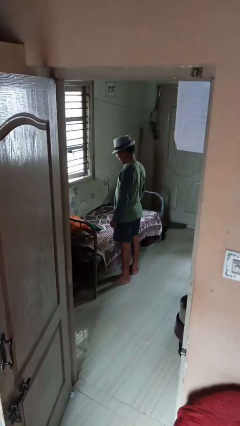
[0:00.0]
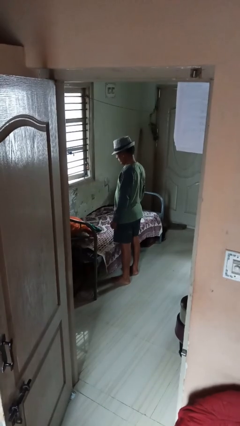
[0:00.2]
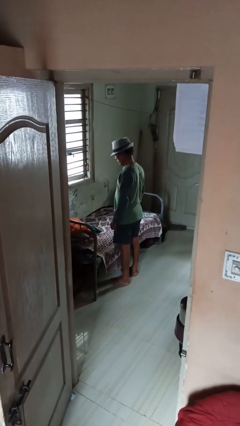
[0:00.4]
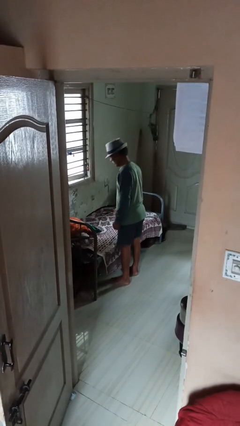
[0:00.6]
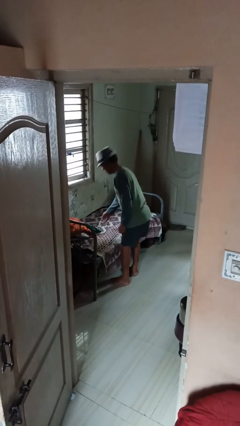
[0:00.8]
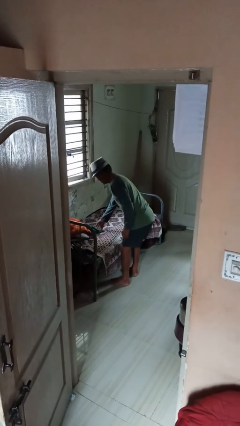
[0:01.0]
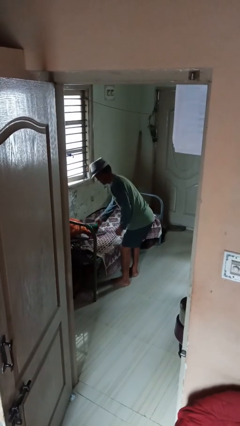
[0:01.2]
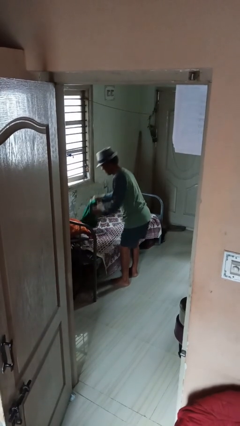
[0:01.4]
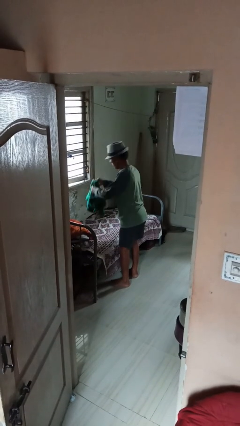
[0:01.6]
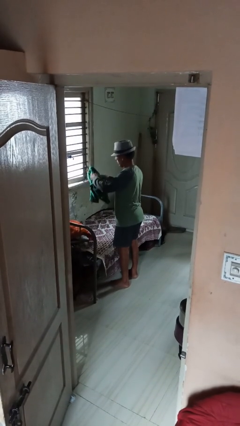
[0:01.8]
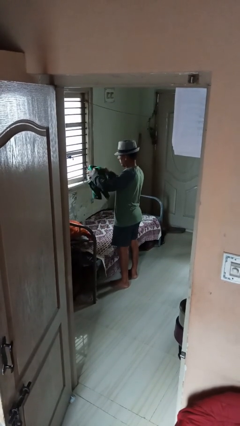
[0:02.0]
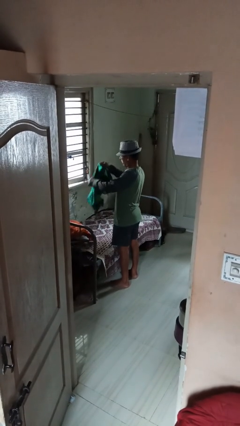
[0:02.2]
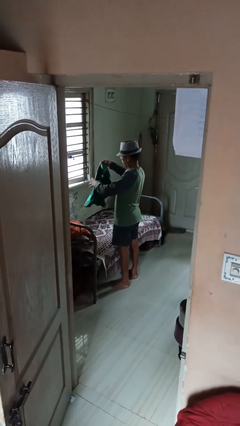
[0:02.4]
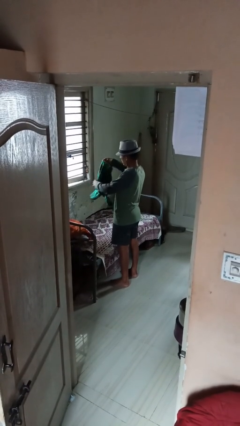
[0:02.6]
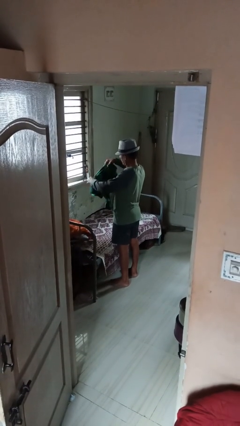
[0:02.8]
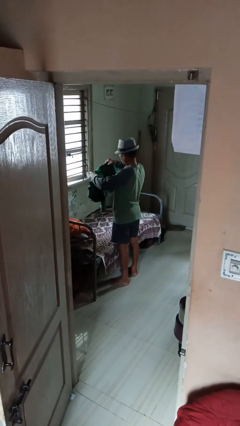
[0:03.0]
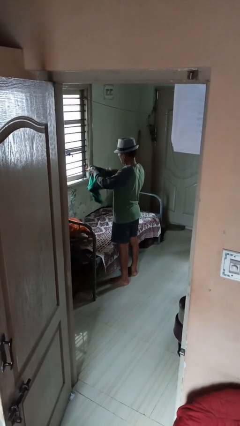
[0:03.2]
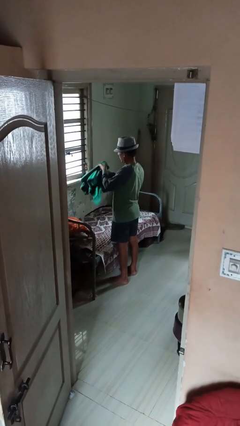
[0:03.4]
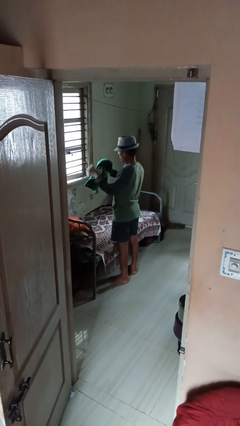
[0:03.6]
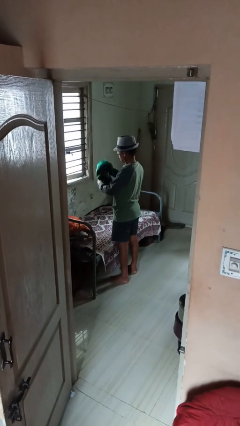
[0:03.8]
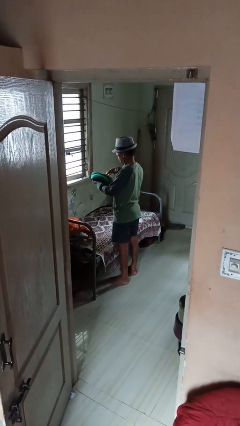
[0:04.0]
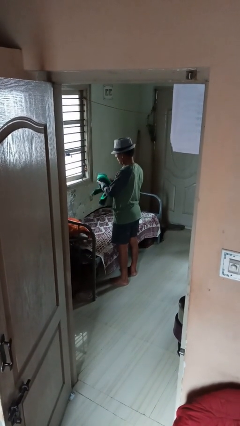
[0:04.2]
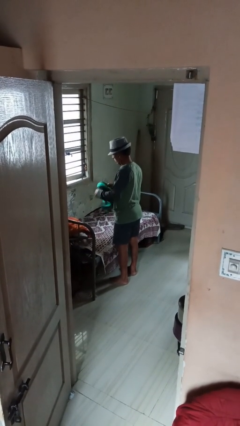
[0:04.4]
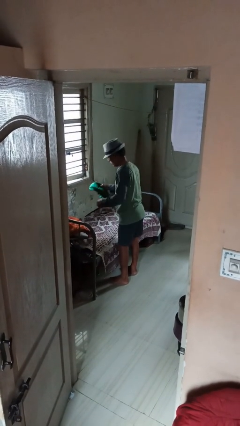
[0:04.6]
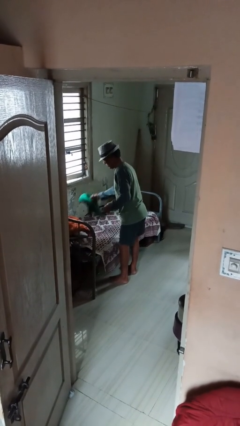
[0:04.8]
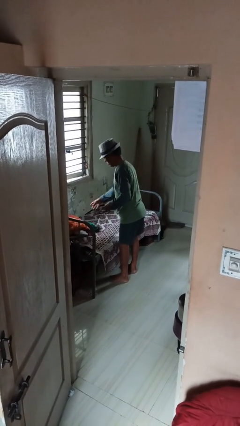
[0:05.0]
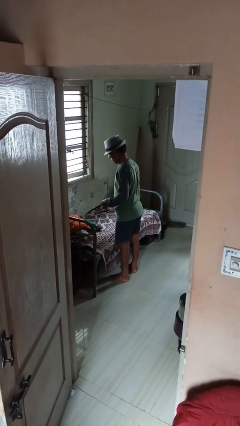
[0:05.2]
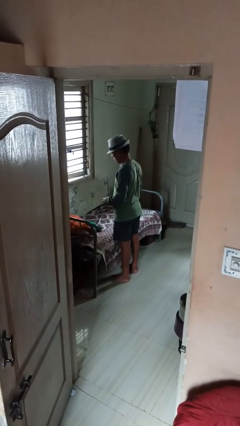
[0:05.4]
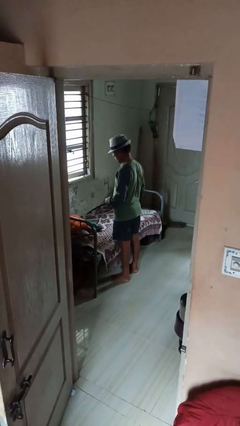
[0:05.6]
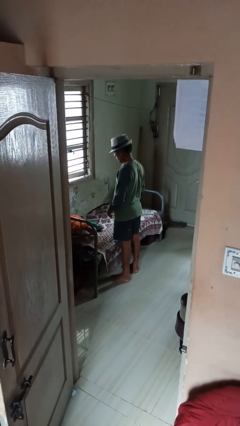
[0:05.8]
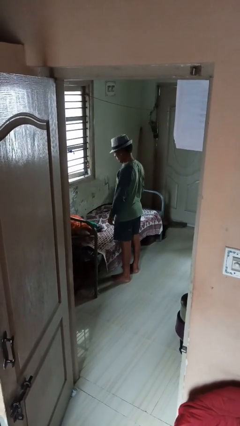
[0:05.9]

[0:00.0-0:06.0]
person folds shirt

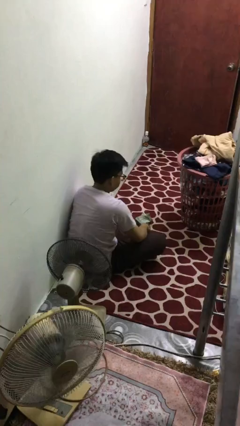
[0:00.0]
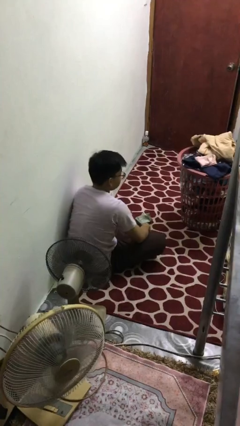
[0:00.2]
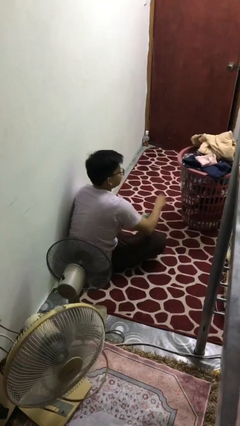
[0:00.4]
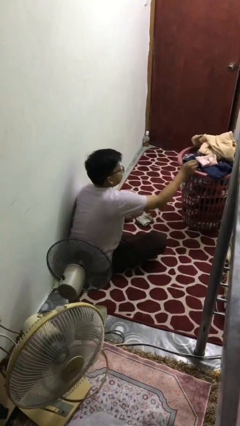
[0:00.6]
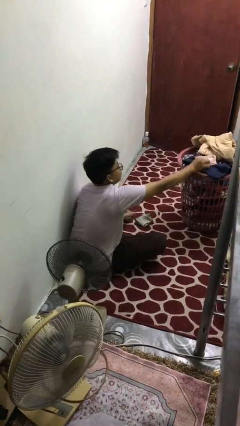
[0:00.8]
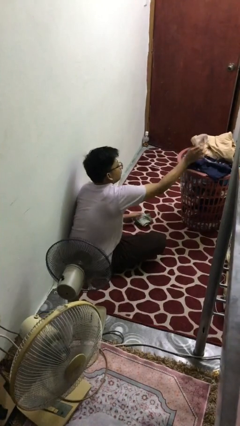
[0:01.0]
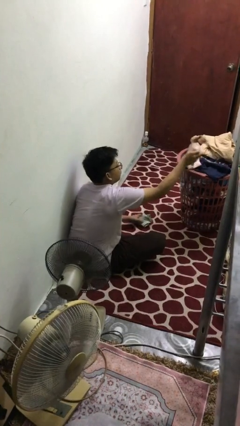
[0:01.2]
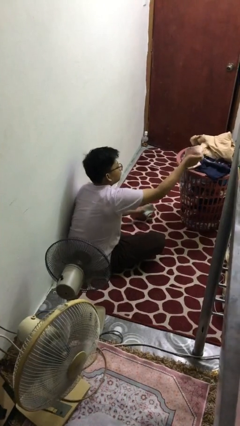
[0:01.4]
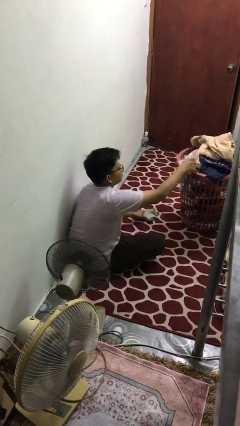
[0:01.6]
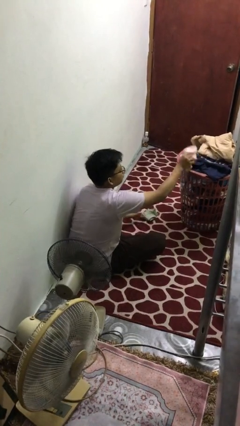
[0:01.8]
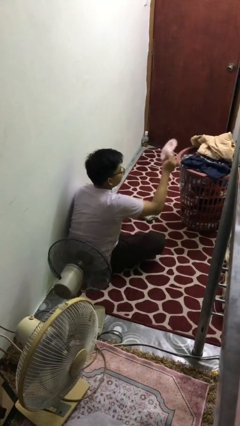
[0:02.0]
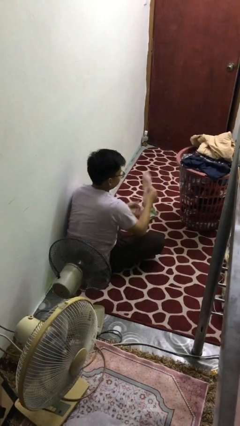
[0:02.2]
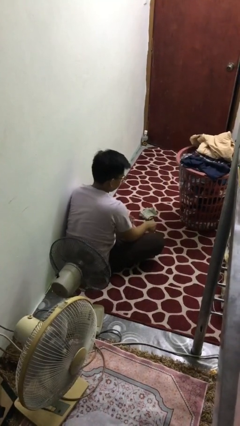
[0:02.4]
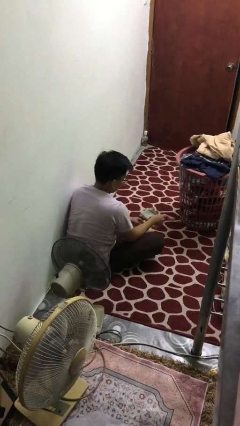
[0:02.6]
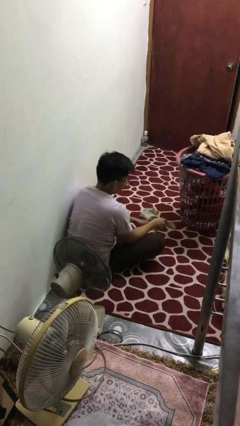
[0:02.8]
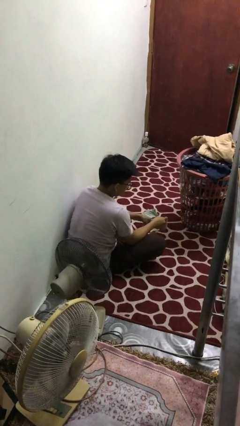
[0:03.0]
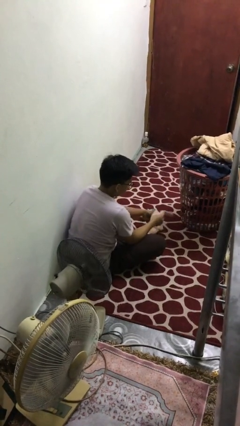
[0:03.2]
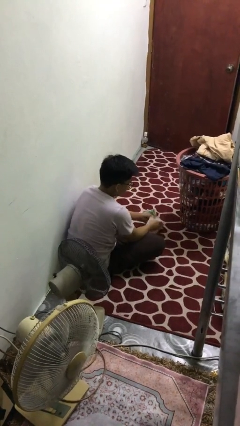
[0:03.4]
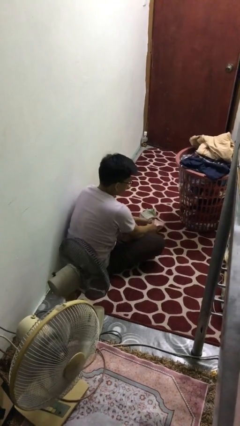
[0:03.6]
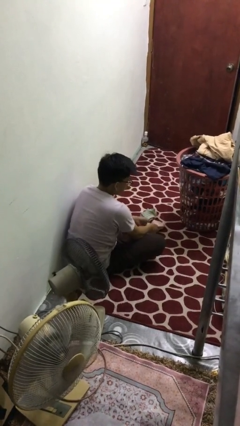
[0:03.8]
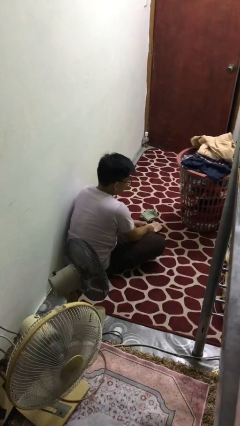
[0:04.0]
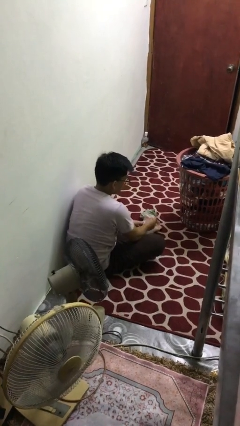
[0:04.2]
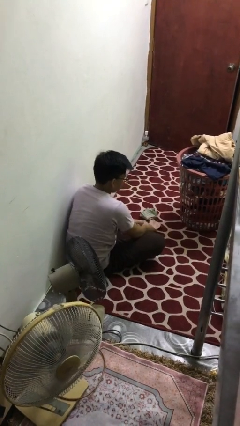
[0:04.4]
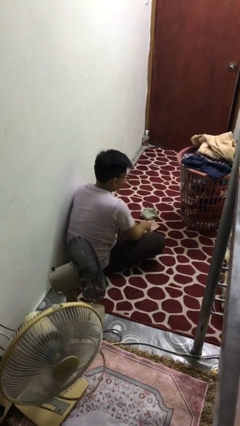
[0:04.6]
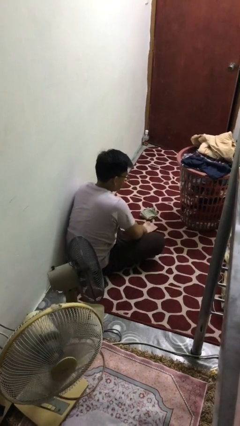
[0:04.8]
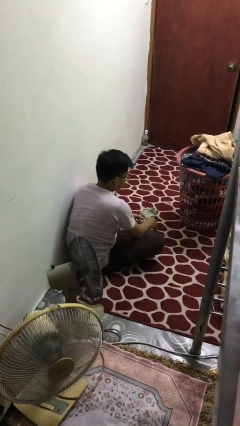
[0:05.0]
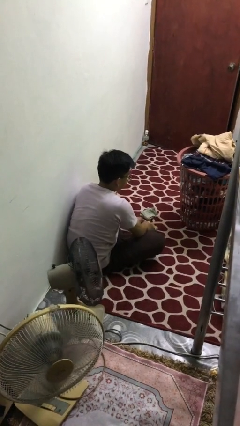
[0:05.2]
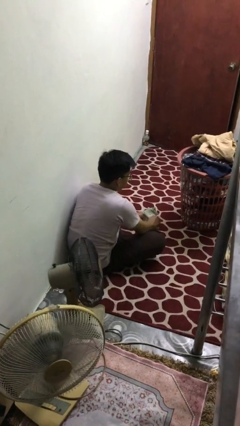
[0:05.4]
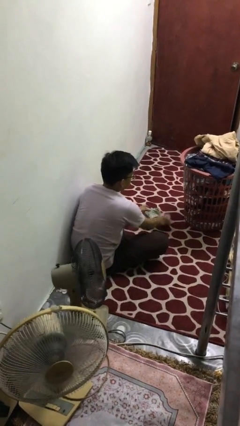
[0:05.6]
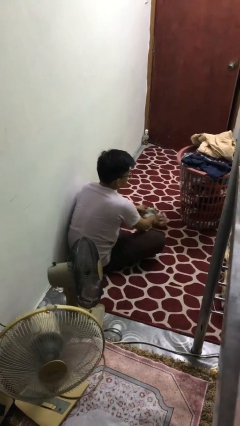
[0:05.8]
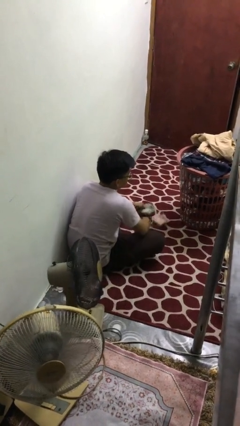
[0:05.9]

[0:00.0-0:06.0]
person folds socks

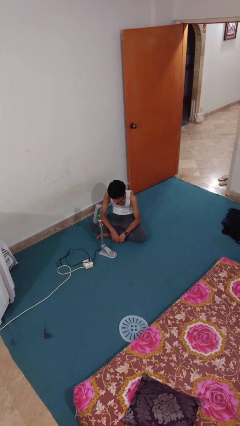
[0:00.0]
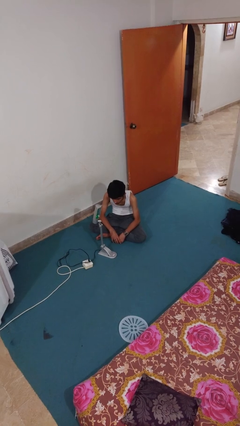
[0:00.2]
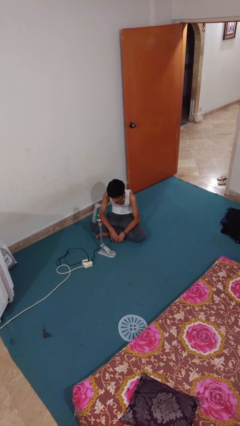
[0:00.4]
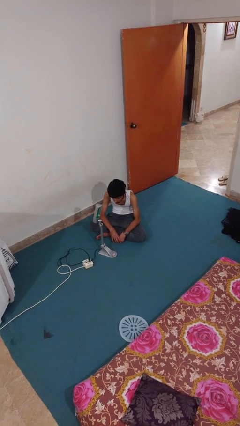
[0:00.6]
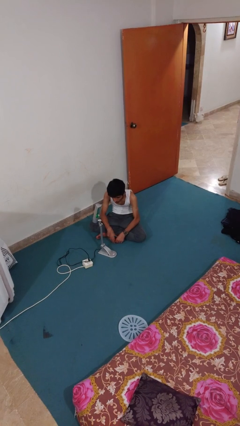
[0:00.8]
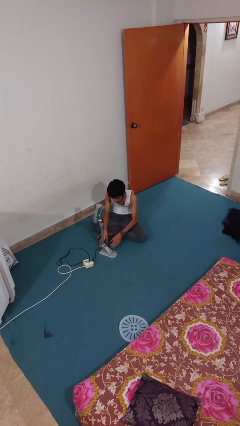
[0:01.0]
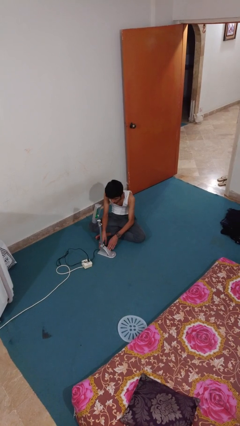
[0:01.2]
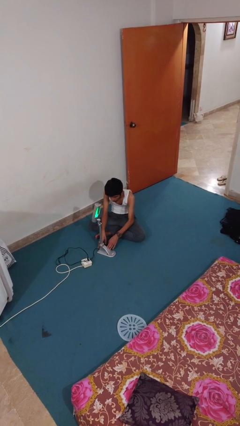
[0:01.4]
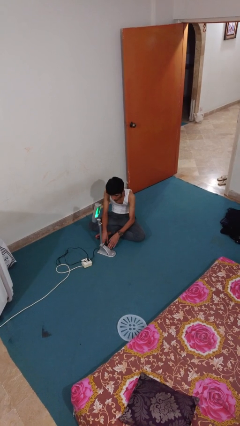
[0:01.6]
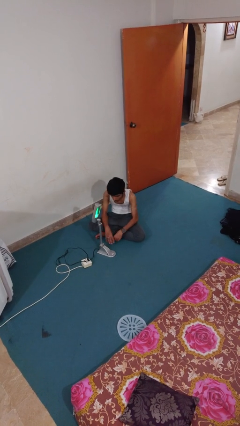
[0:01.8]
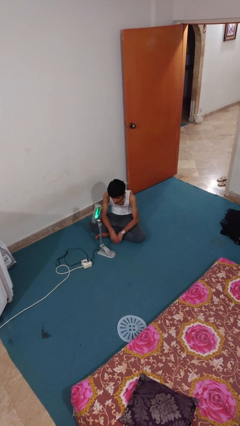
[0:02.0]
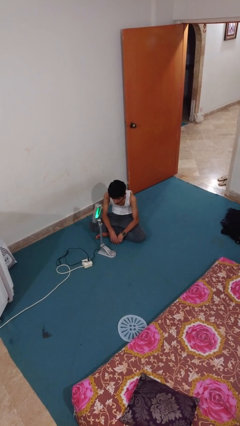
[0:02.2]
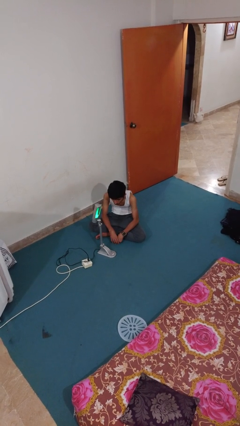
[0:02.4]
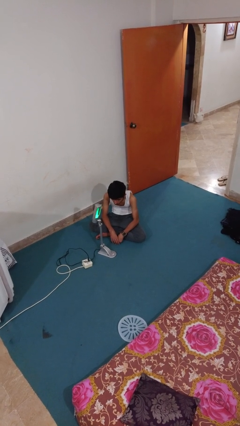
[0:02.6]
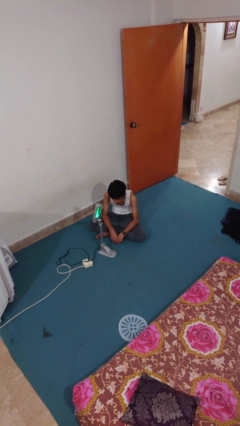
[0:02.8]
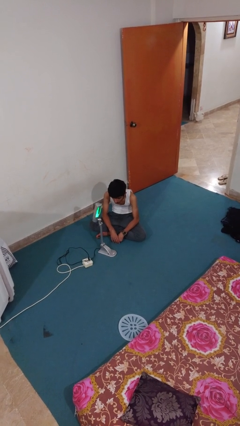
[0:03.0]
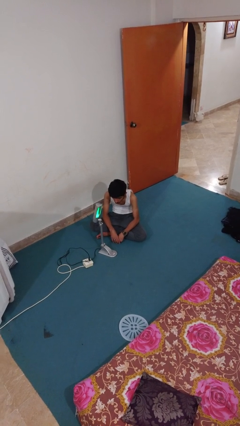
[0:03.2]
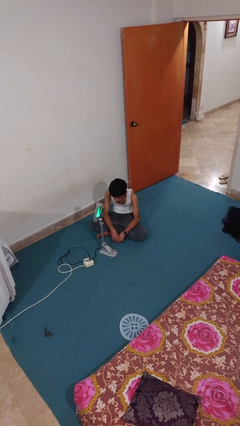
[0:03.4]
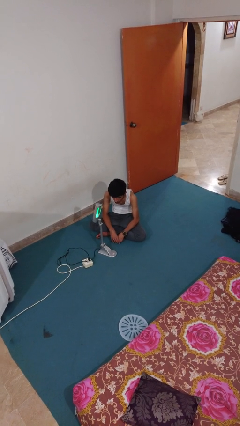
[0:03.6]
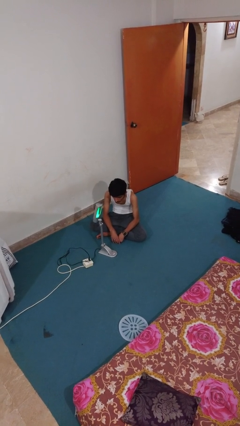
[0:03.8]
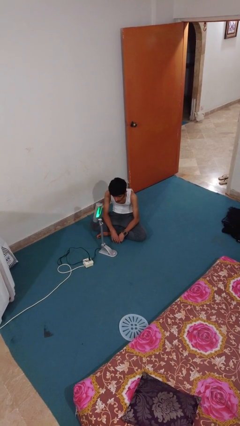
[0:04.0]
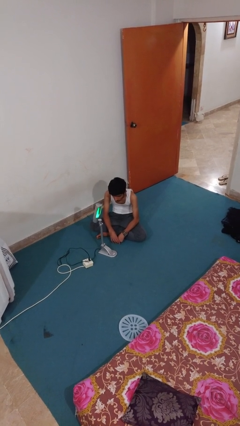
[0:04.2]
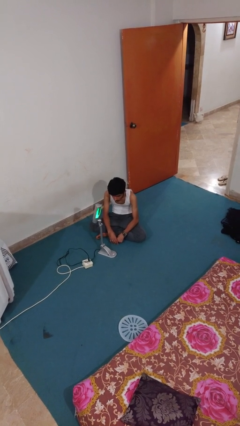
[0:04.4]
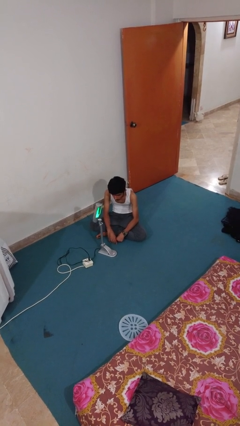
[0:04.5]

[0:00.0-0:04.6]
person turns on lamp

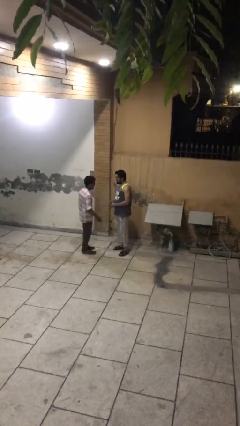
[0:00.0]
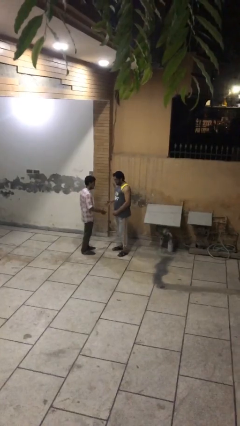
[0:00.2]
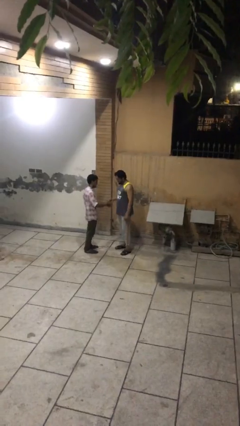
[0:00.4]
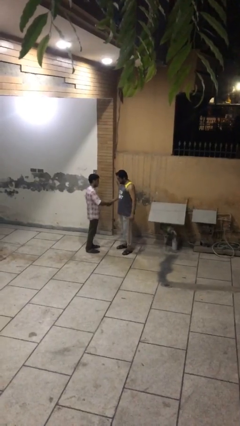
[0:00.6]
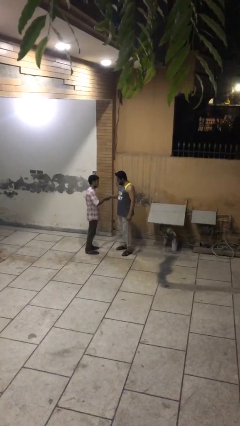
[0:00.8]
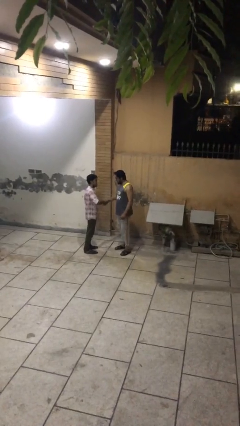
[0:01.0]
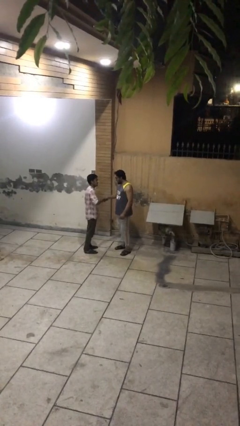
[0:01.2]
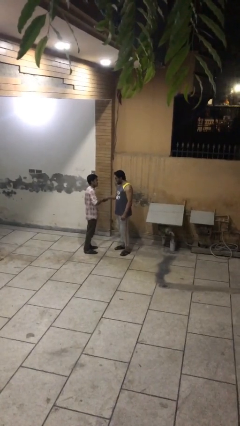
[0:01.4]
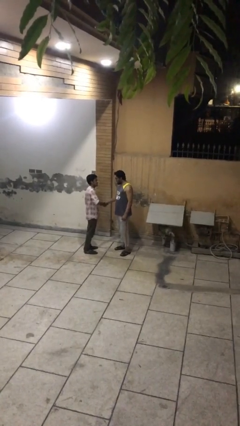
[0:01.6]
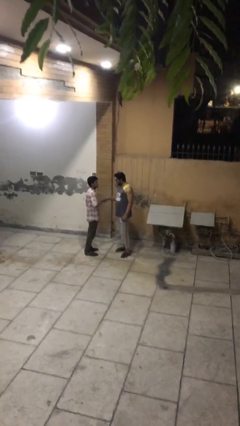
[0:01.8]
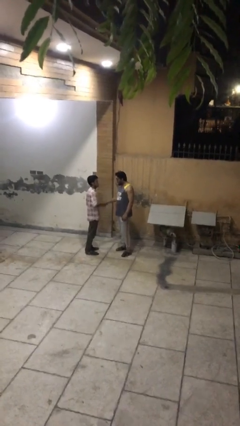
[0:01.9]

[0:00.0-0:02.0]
person shakes hand
